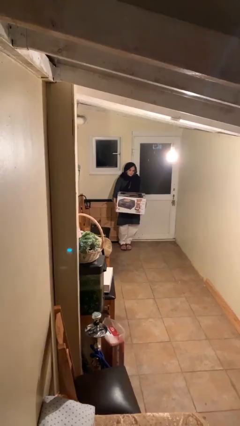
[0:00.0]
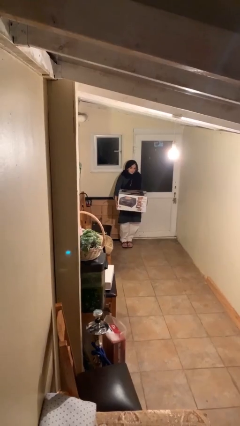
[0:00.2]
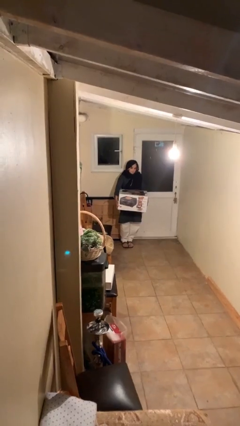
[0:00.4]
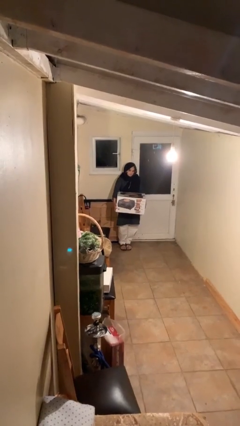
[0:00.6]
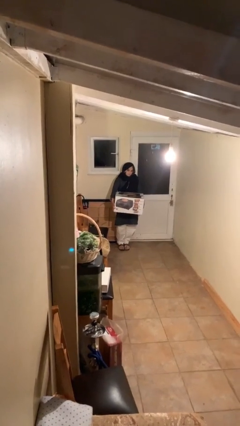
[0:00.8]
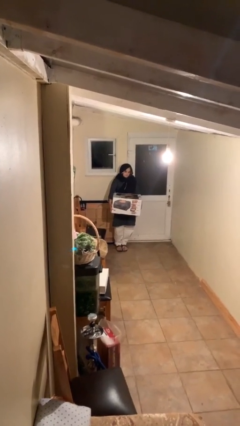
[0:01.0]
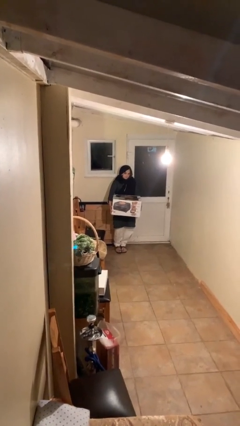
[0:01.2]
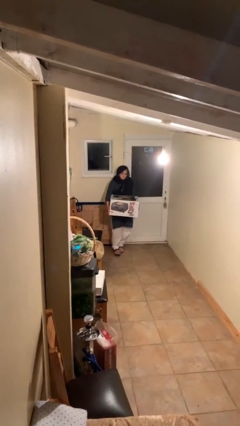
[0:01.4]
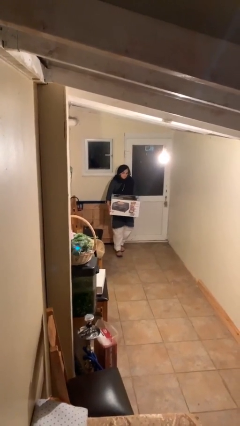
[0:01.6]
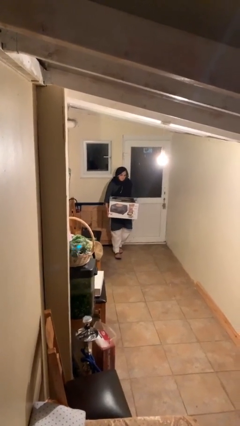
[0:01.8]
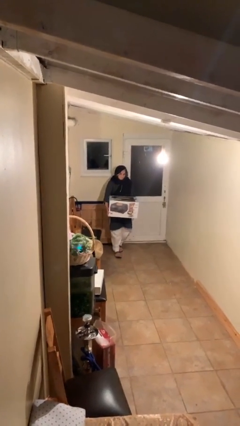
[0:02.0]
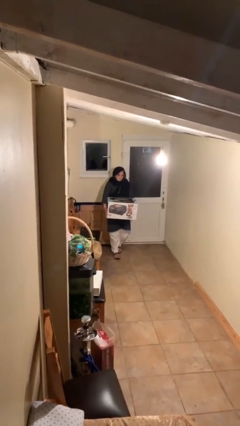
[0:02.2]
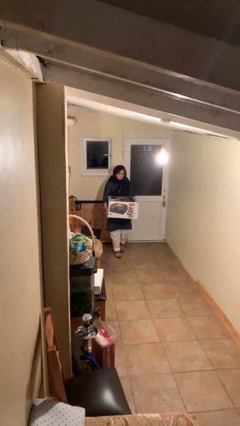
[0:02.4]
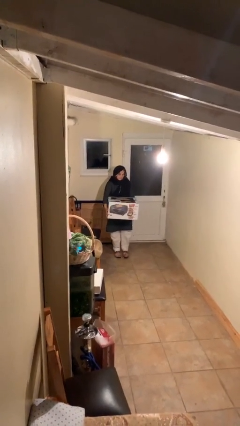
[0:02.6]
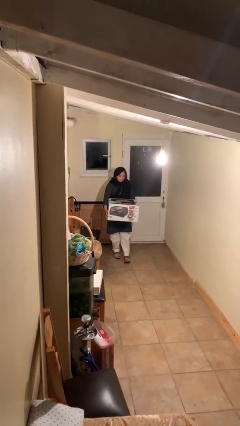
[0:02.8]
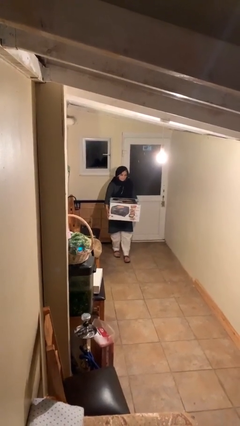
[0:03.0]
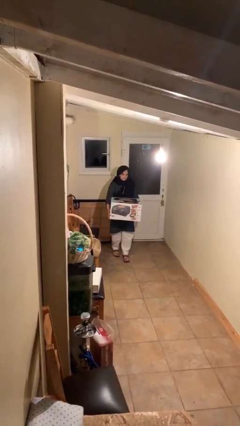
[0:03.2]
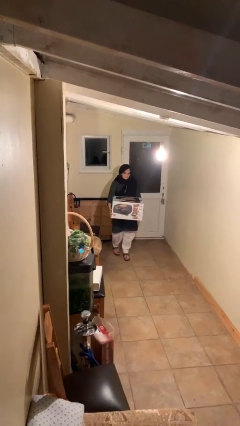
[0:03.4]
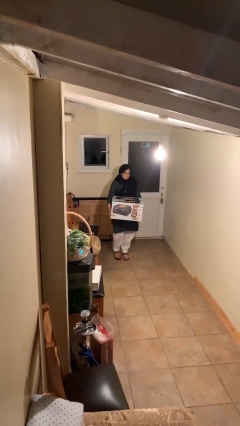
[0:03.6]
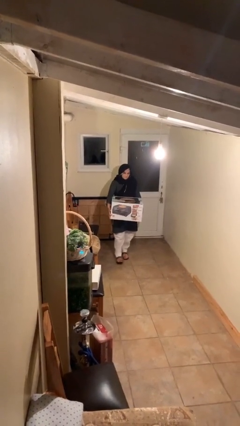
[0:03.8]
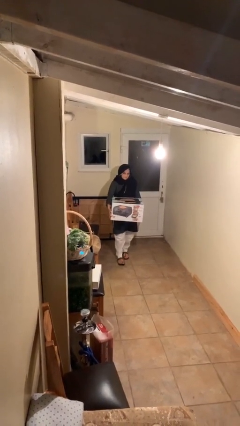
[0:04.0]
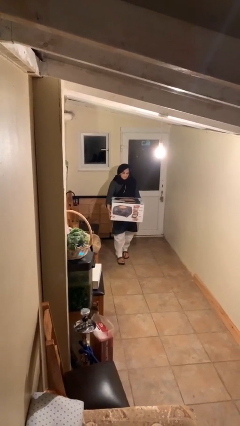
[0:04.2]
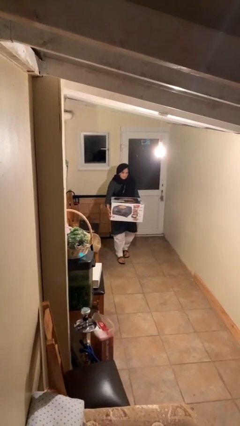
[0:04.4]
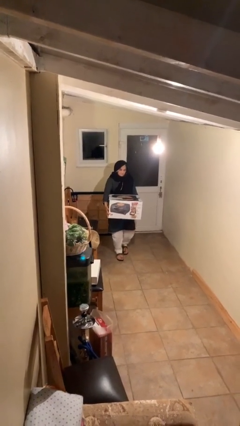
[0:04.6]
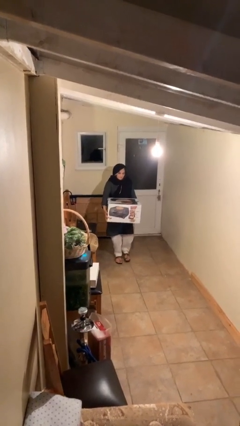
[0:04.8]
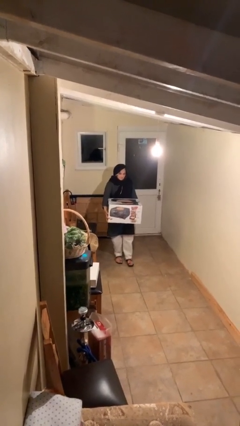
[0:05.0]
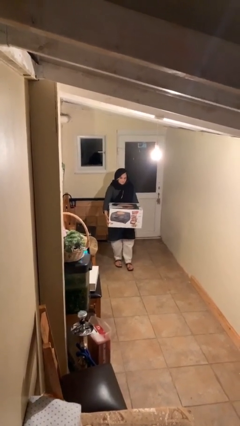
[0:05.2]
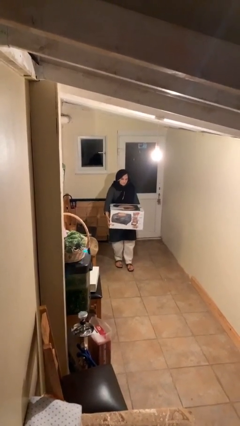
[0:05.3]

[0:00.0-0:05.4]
person carries heavy object

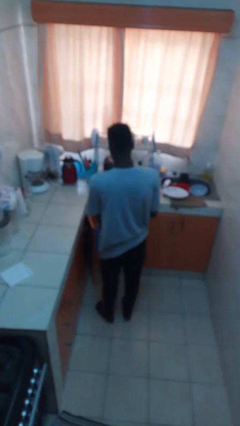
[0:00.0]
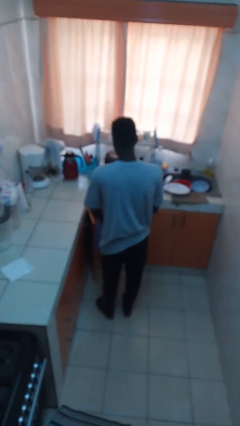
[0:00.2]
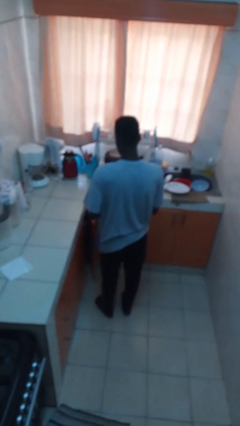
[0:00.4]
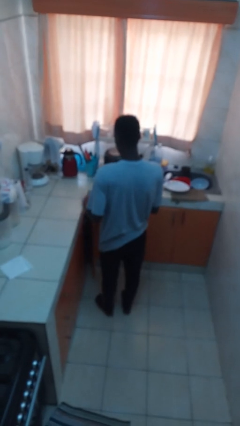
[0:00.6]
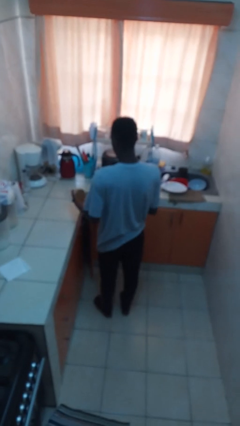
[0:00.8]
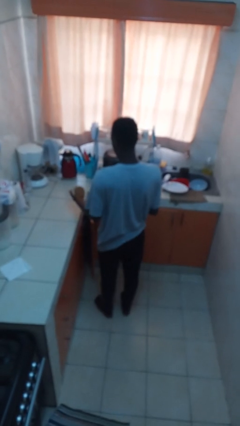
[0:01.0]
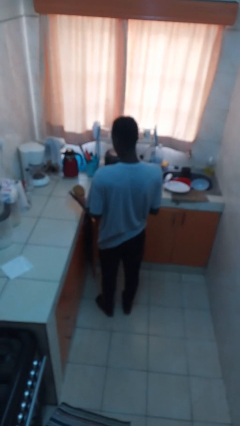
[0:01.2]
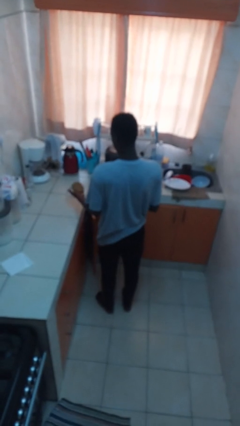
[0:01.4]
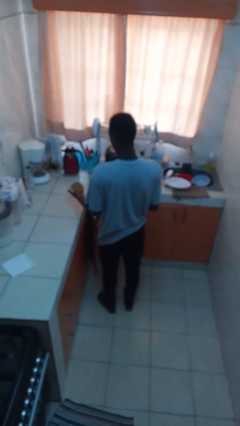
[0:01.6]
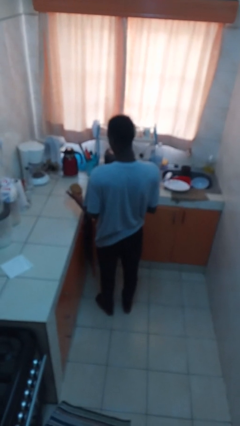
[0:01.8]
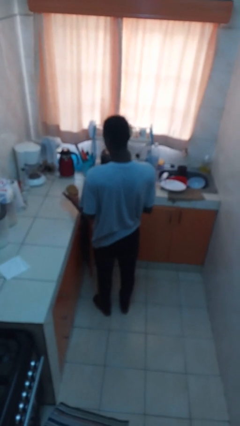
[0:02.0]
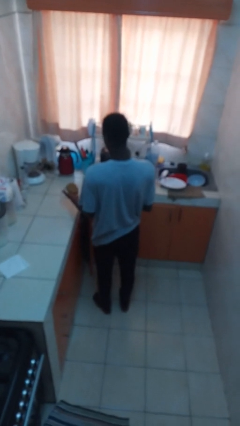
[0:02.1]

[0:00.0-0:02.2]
person takes object from bag

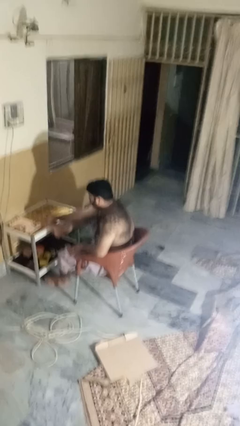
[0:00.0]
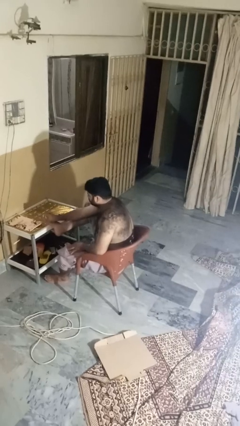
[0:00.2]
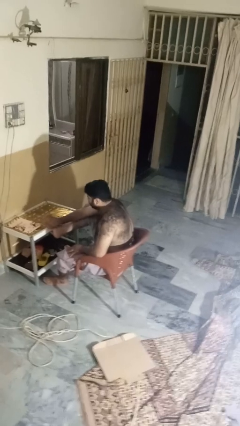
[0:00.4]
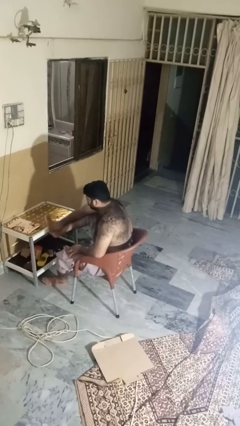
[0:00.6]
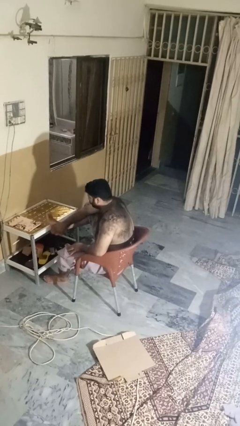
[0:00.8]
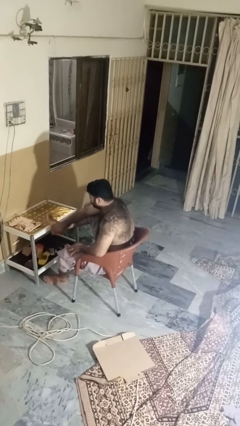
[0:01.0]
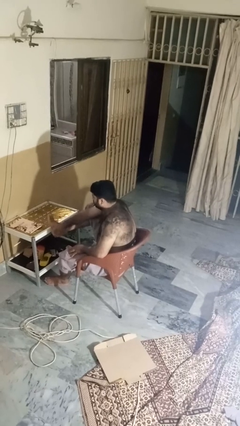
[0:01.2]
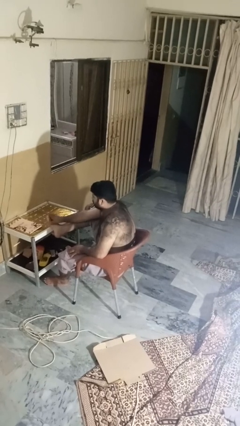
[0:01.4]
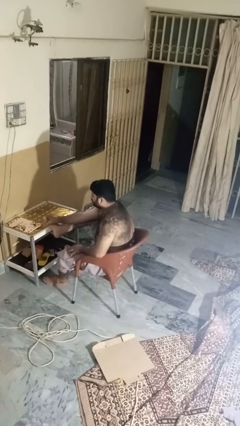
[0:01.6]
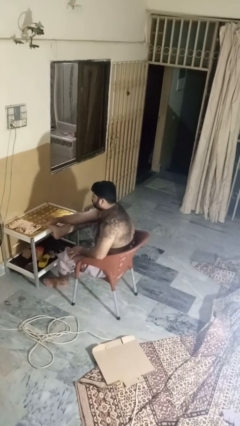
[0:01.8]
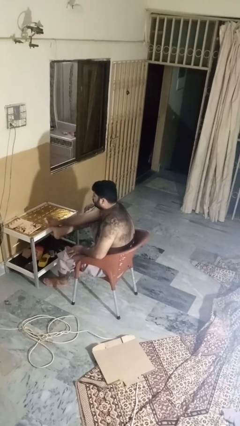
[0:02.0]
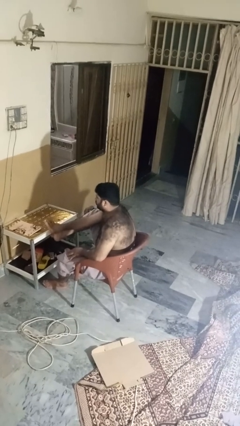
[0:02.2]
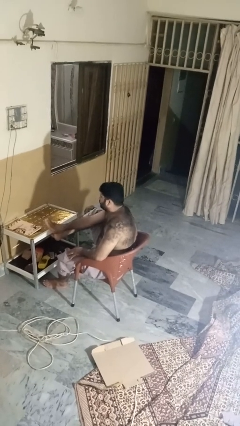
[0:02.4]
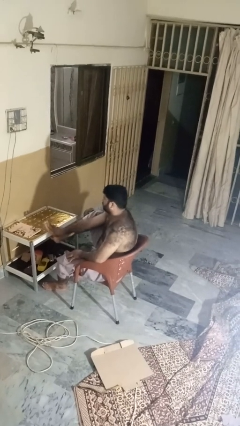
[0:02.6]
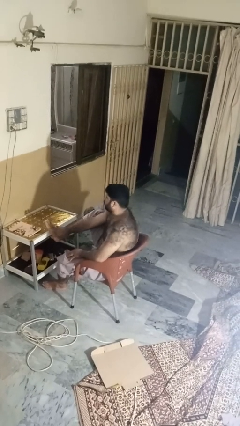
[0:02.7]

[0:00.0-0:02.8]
person stubs toe

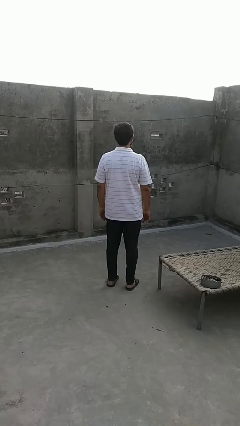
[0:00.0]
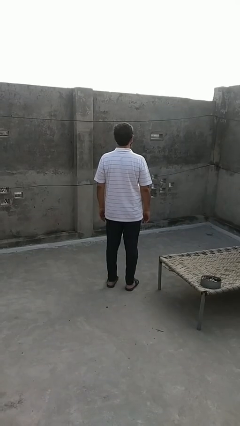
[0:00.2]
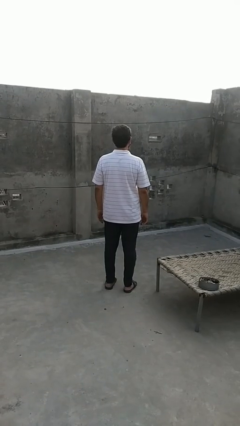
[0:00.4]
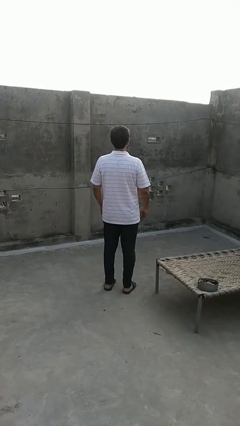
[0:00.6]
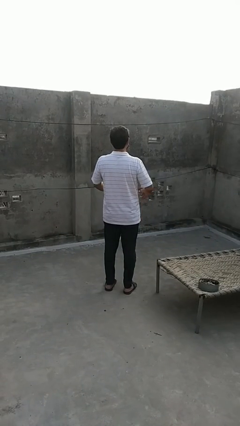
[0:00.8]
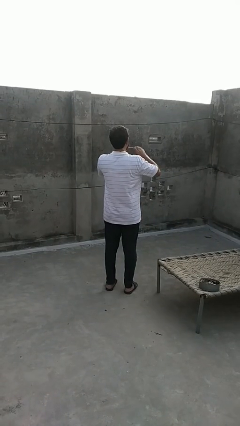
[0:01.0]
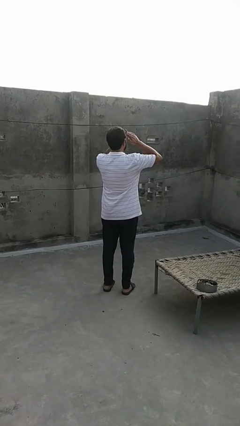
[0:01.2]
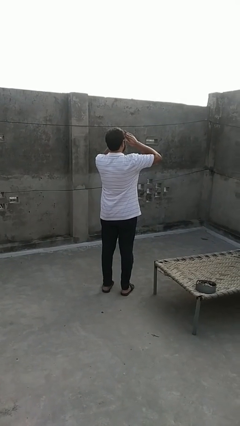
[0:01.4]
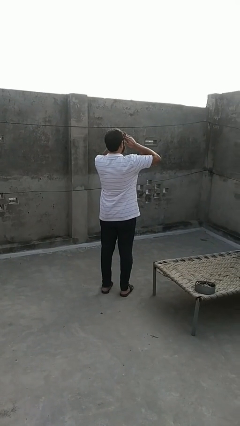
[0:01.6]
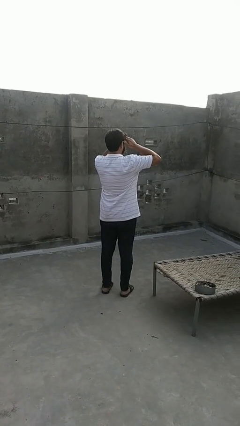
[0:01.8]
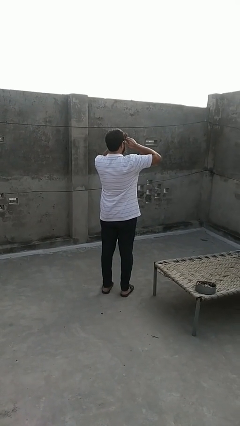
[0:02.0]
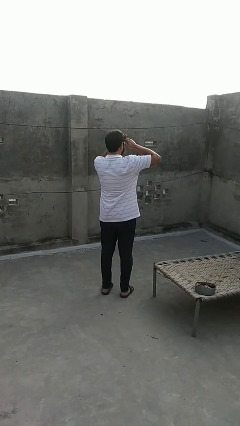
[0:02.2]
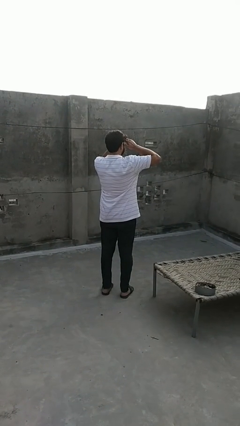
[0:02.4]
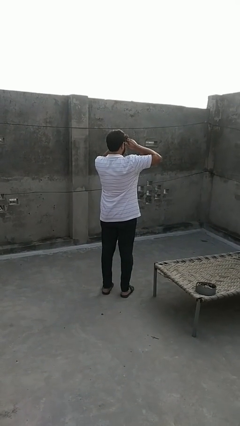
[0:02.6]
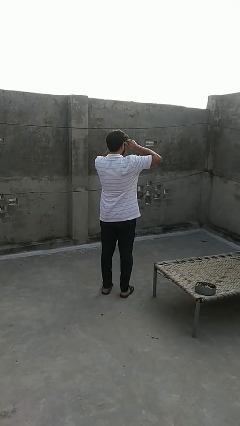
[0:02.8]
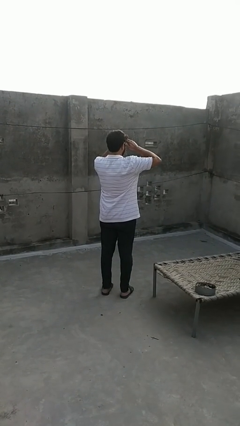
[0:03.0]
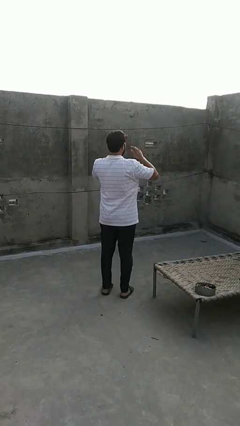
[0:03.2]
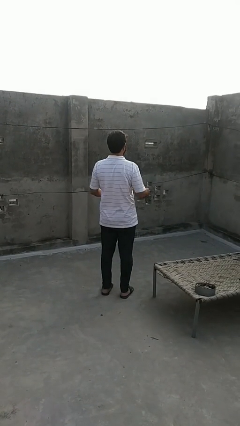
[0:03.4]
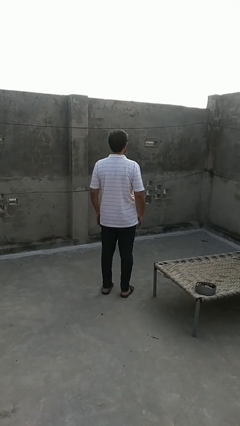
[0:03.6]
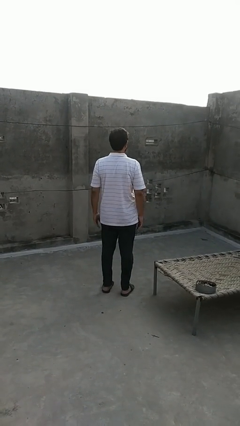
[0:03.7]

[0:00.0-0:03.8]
person shades eyes

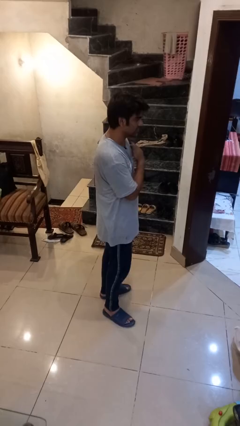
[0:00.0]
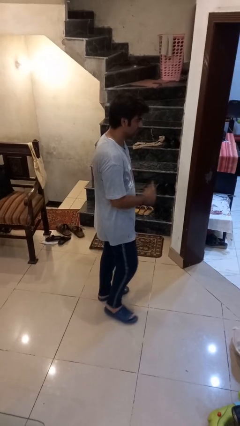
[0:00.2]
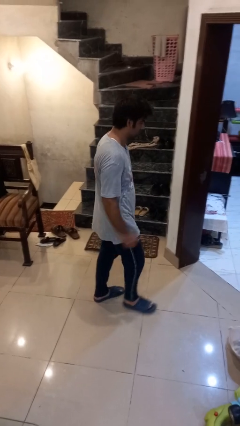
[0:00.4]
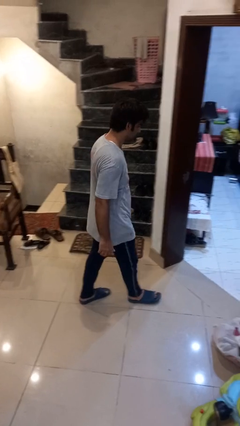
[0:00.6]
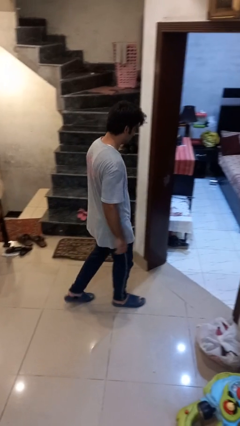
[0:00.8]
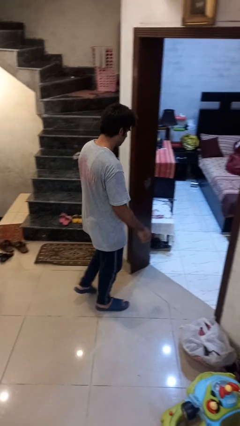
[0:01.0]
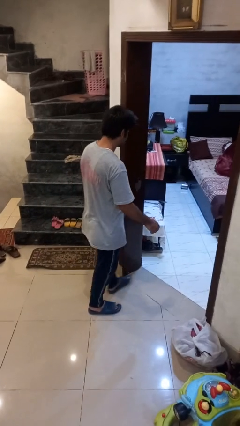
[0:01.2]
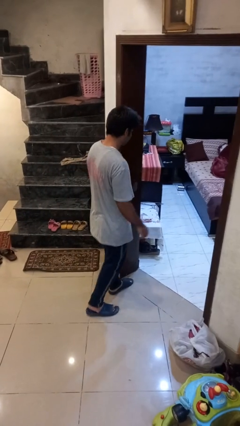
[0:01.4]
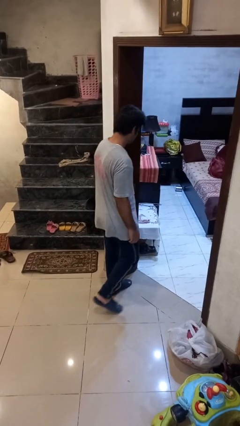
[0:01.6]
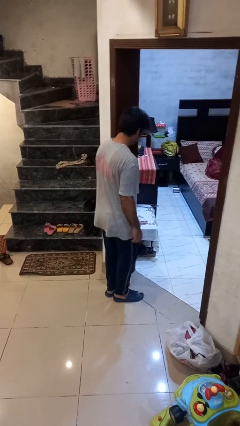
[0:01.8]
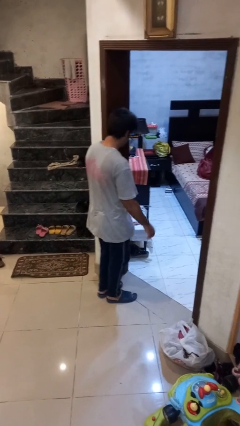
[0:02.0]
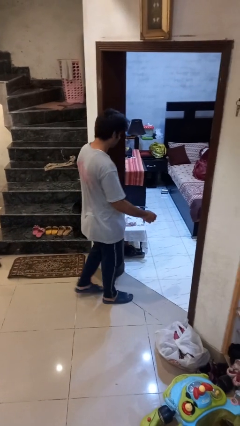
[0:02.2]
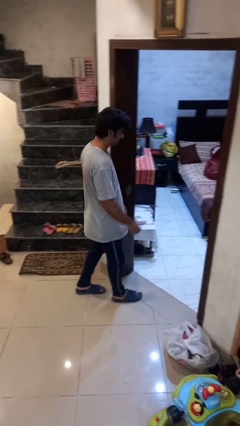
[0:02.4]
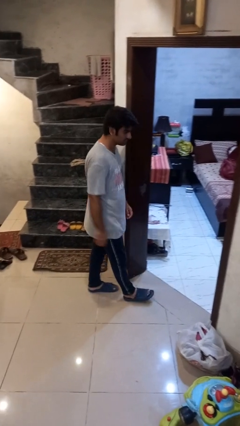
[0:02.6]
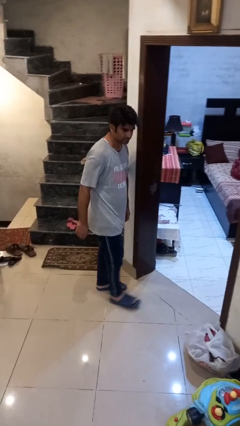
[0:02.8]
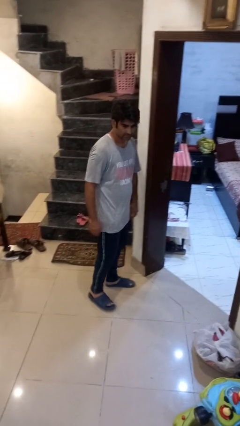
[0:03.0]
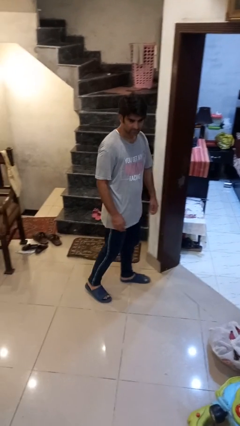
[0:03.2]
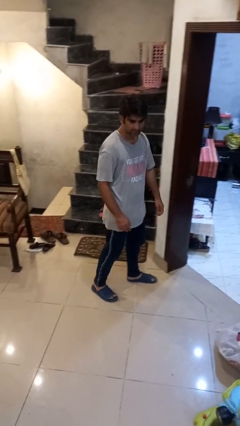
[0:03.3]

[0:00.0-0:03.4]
person bumps into wall
